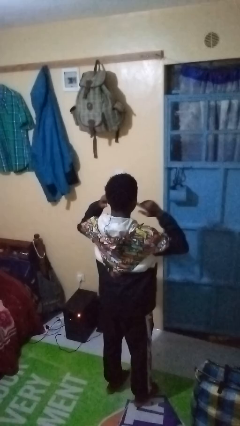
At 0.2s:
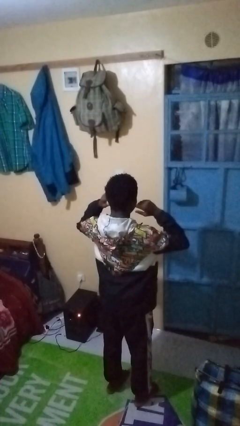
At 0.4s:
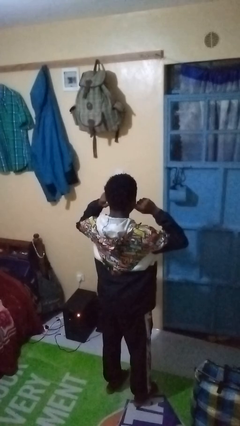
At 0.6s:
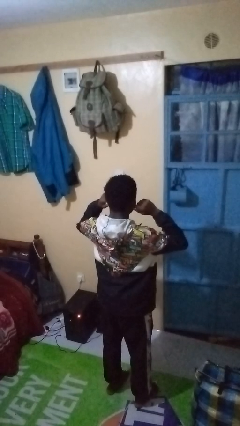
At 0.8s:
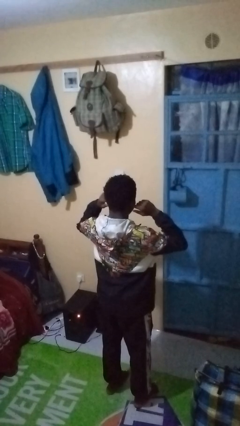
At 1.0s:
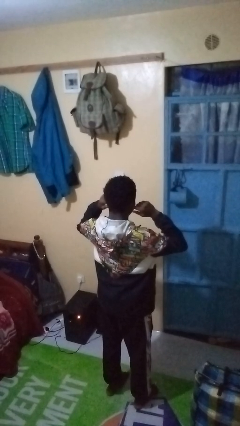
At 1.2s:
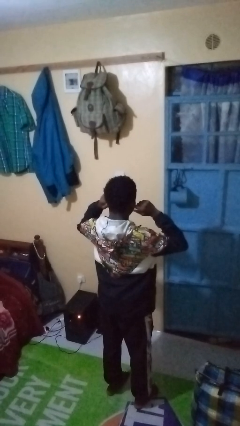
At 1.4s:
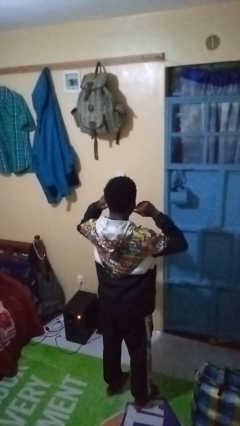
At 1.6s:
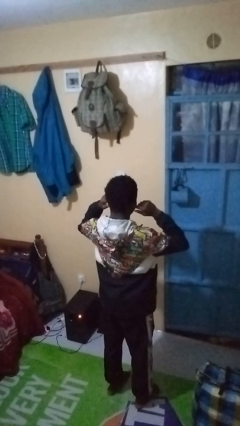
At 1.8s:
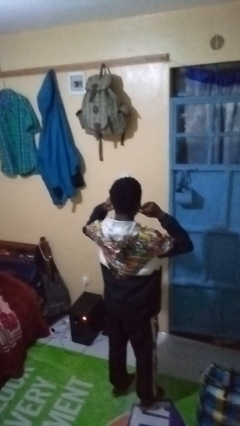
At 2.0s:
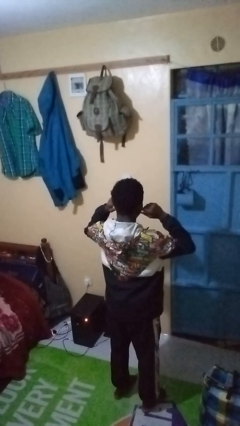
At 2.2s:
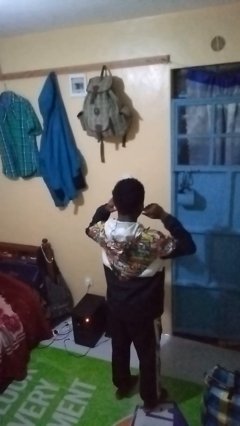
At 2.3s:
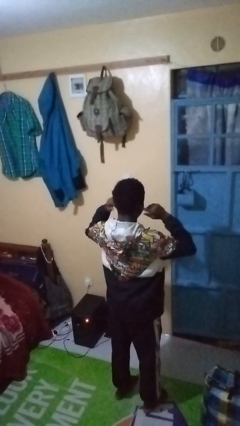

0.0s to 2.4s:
person puts fingers in ear

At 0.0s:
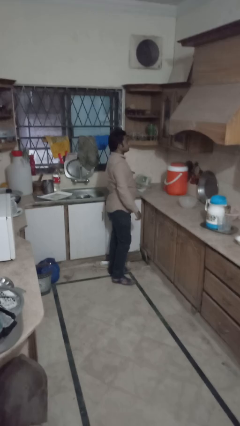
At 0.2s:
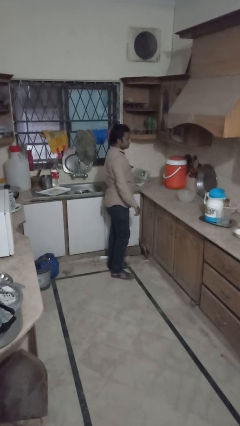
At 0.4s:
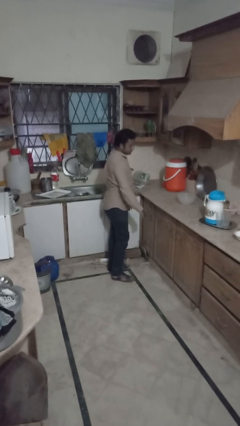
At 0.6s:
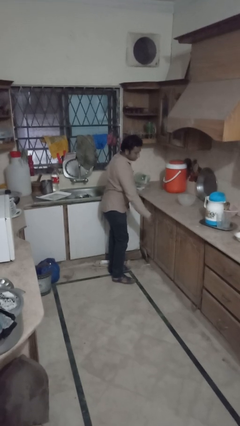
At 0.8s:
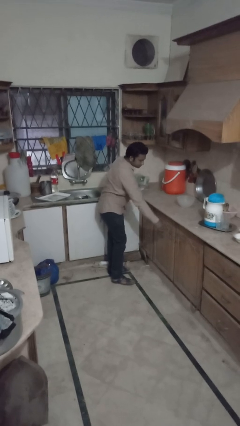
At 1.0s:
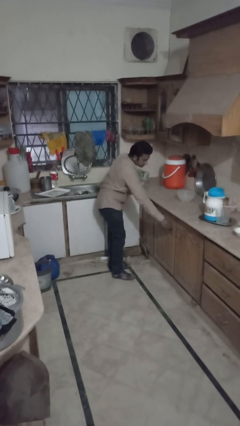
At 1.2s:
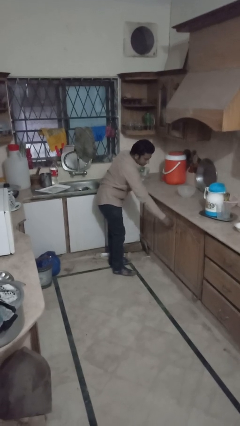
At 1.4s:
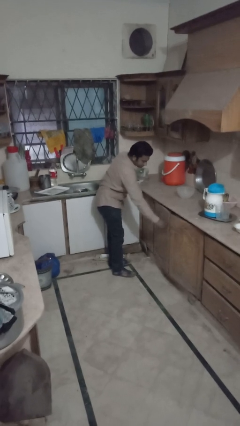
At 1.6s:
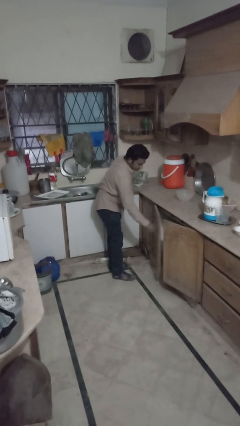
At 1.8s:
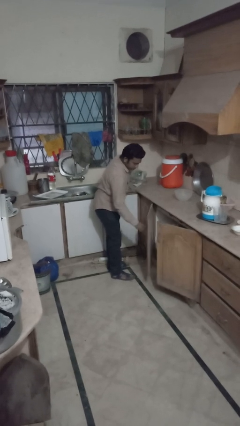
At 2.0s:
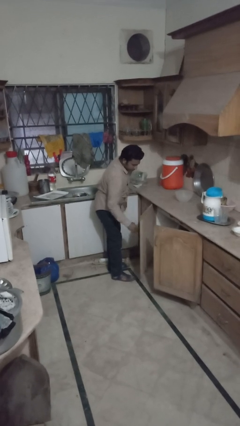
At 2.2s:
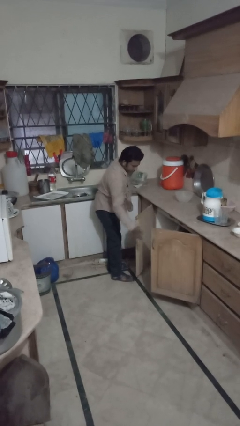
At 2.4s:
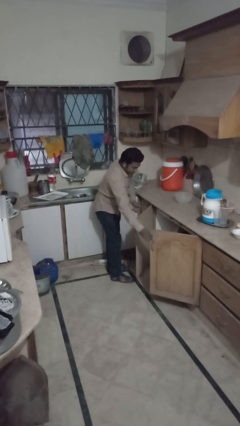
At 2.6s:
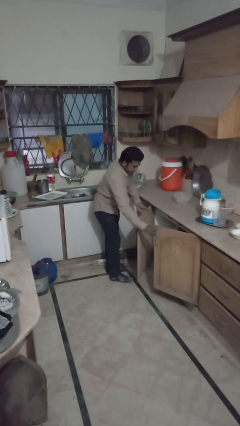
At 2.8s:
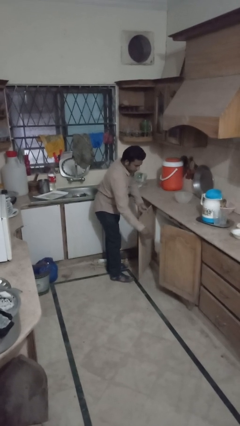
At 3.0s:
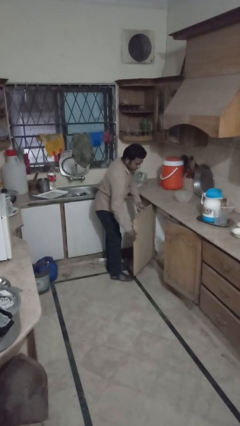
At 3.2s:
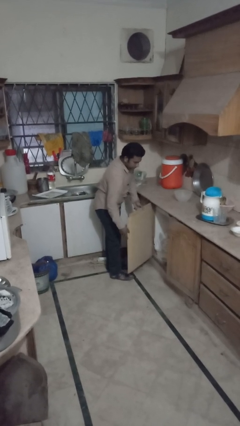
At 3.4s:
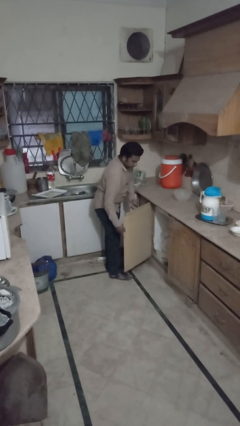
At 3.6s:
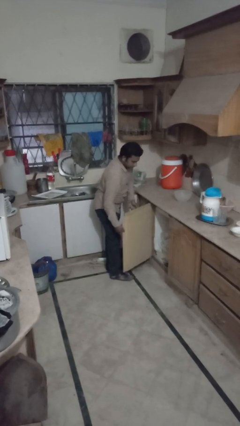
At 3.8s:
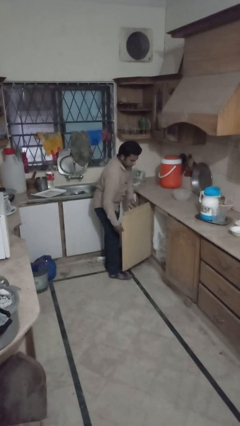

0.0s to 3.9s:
person opens cabinet

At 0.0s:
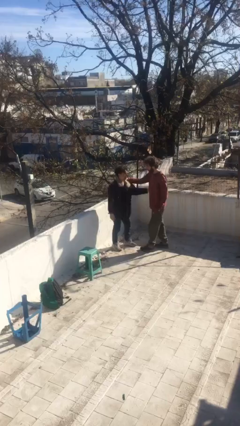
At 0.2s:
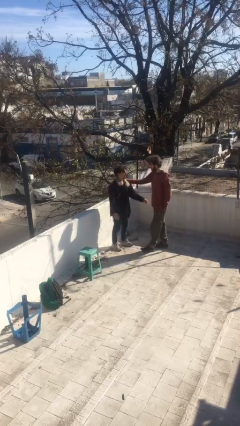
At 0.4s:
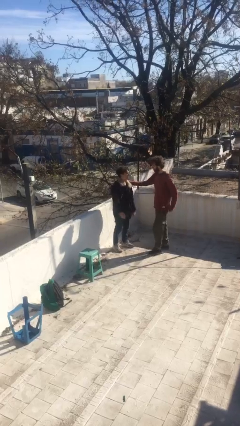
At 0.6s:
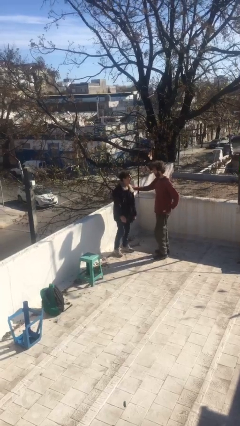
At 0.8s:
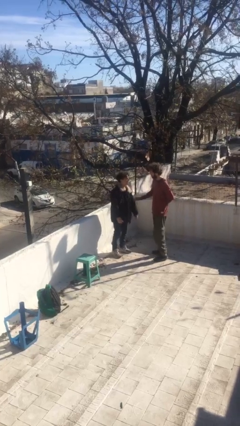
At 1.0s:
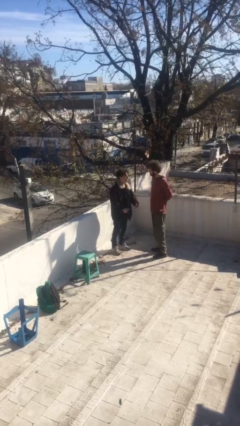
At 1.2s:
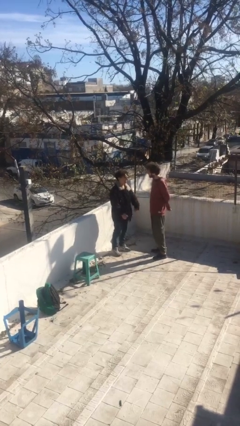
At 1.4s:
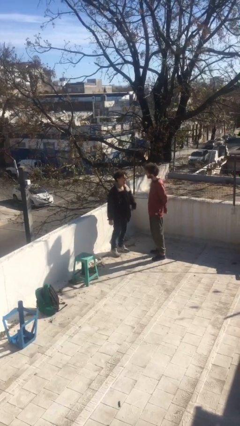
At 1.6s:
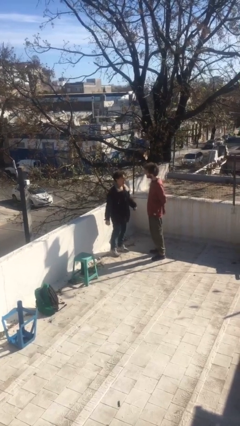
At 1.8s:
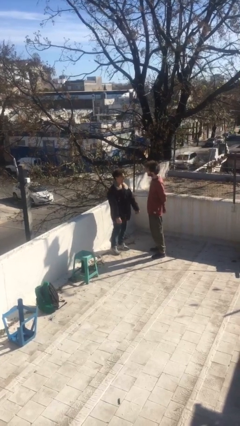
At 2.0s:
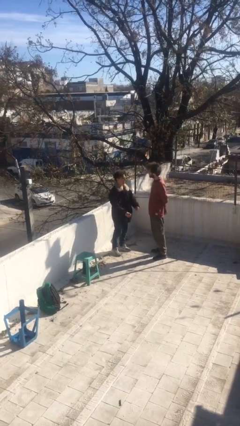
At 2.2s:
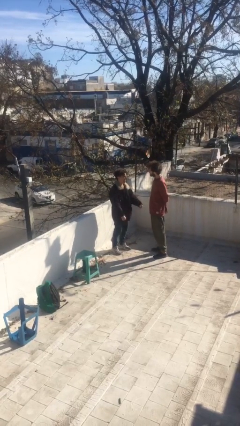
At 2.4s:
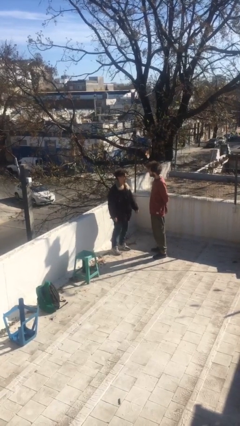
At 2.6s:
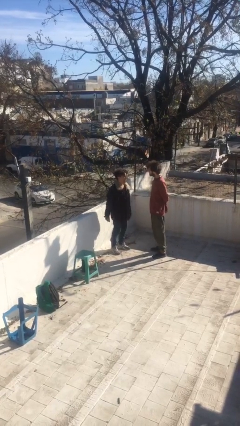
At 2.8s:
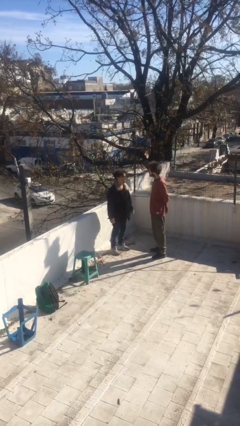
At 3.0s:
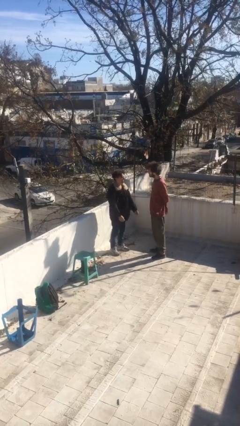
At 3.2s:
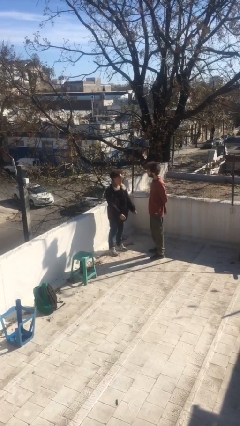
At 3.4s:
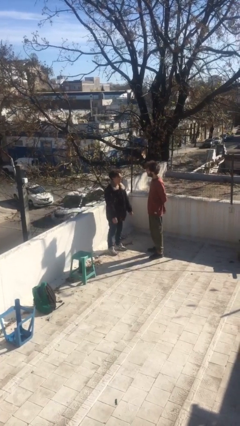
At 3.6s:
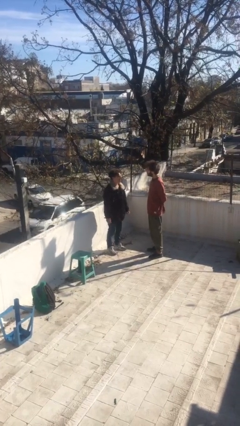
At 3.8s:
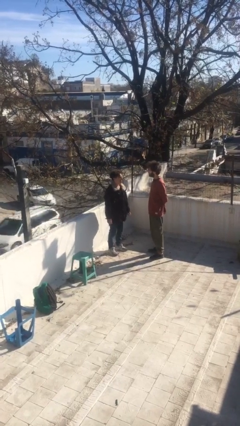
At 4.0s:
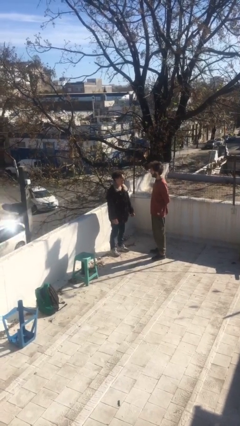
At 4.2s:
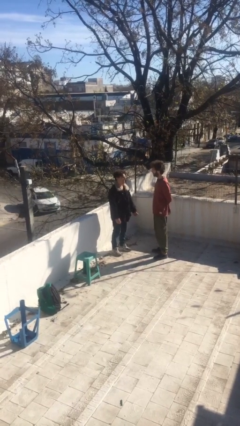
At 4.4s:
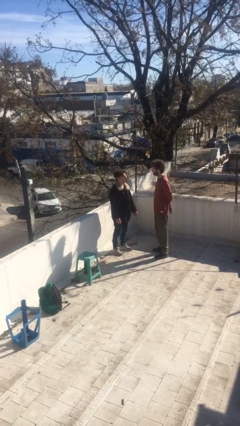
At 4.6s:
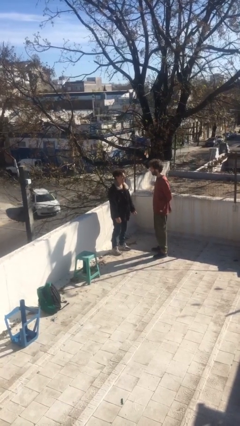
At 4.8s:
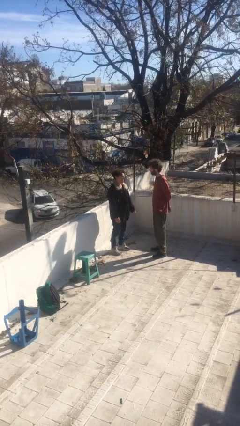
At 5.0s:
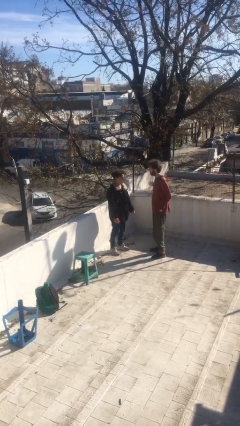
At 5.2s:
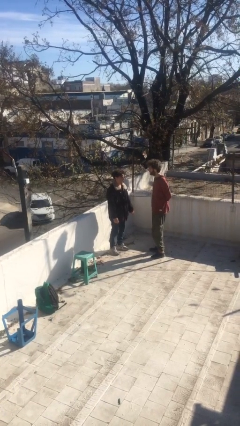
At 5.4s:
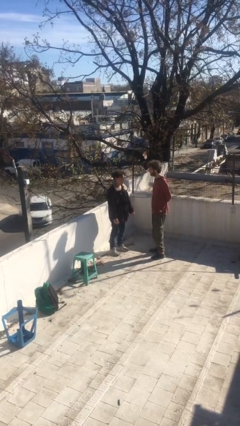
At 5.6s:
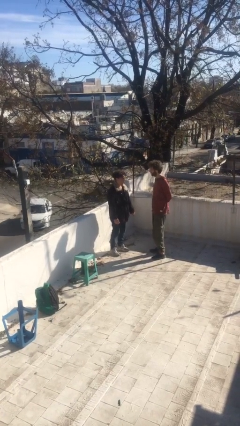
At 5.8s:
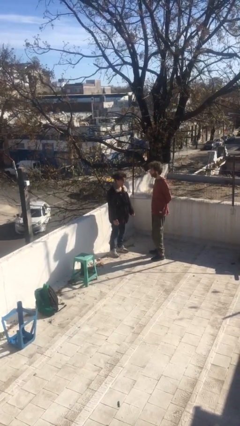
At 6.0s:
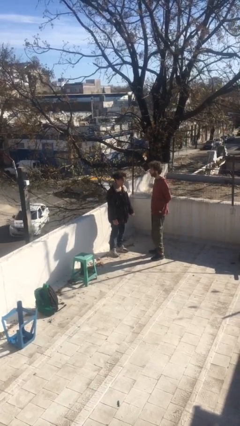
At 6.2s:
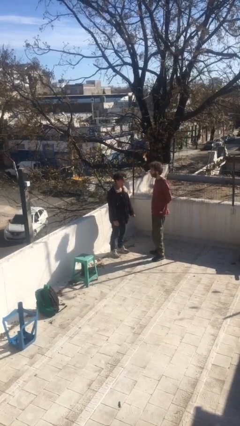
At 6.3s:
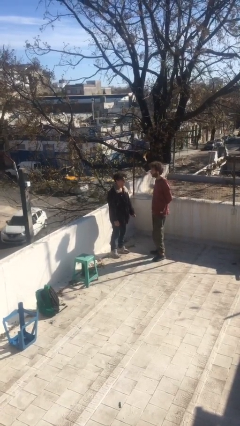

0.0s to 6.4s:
person talks to person

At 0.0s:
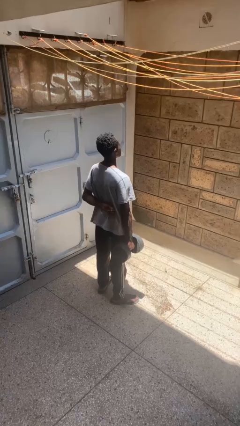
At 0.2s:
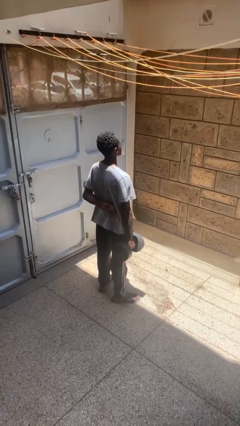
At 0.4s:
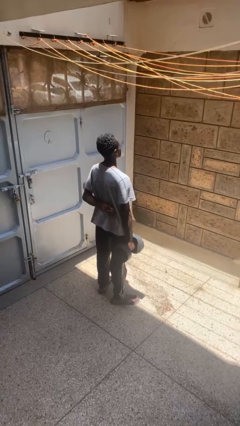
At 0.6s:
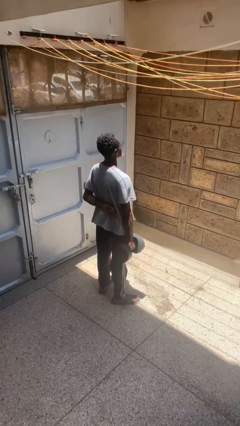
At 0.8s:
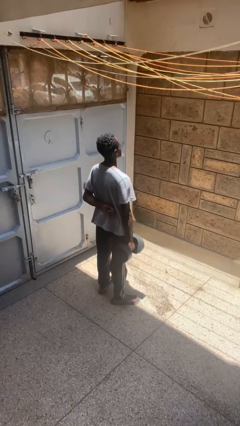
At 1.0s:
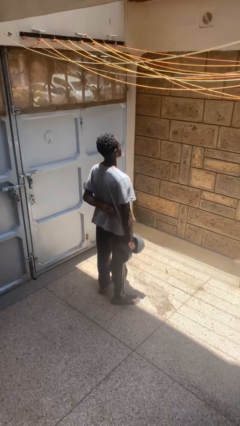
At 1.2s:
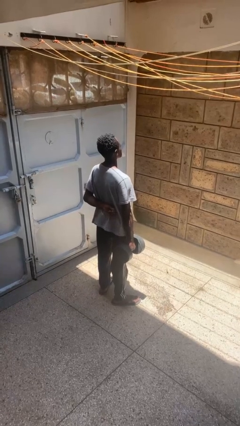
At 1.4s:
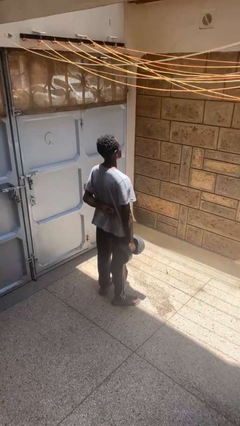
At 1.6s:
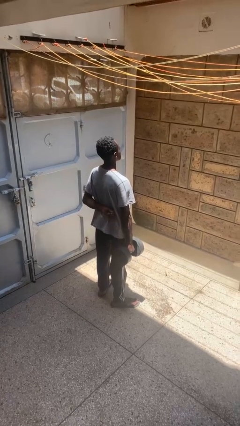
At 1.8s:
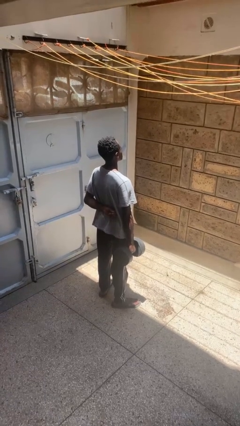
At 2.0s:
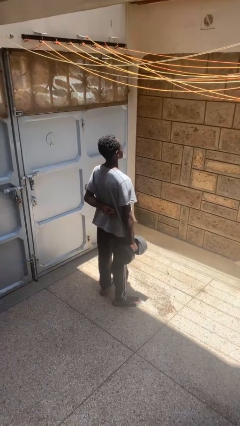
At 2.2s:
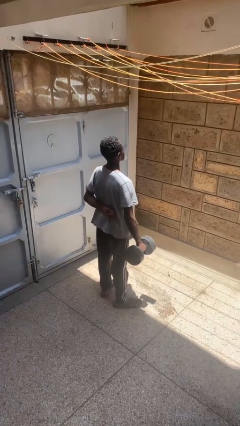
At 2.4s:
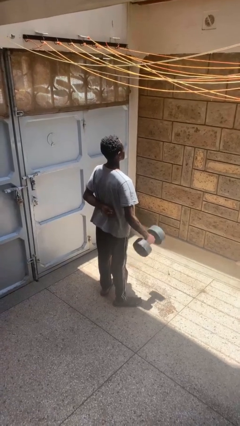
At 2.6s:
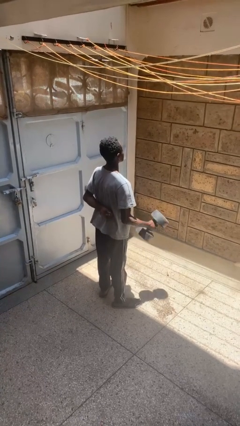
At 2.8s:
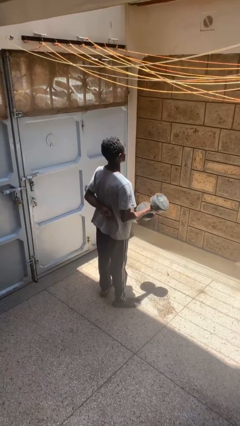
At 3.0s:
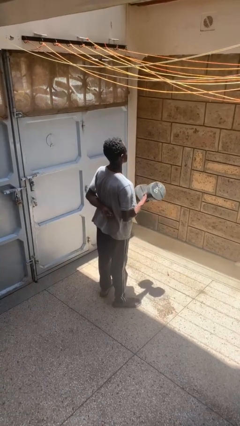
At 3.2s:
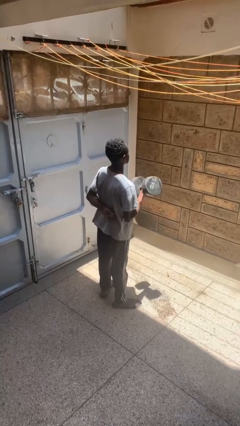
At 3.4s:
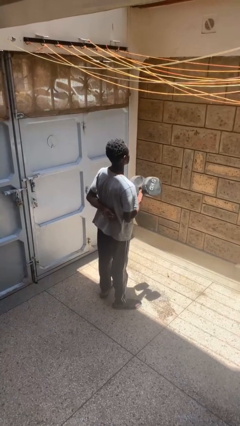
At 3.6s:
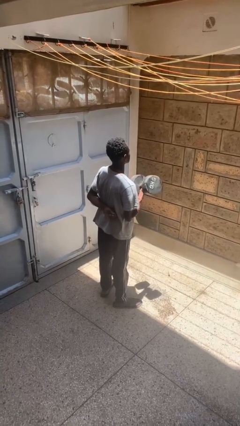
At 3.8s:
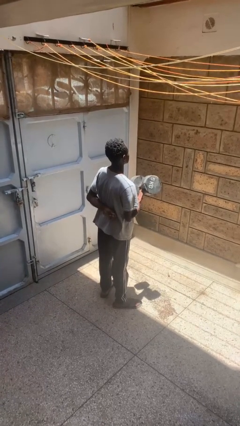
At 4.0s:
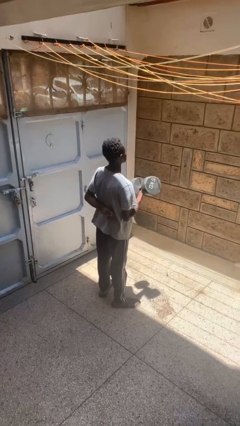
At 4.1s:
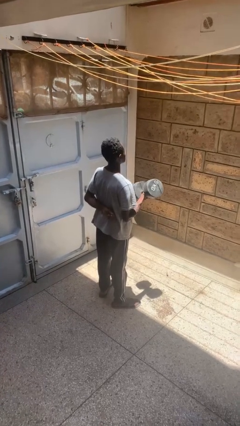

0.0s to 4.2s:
person lifts dumbbells

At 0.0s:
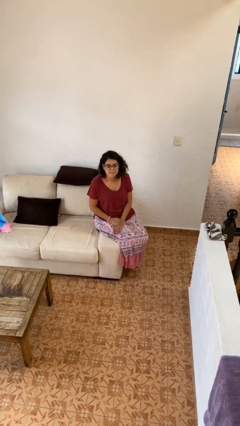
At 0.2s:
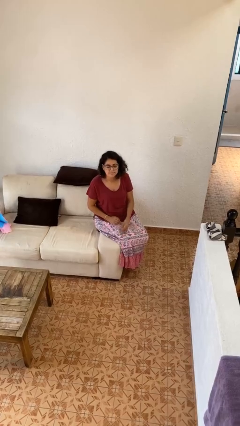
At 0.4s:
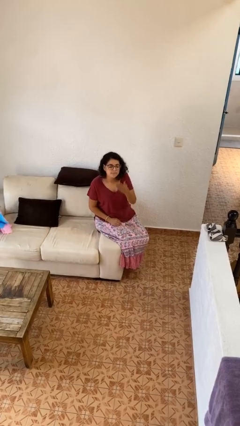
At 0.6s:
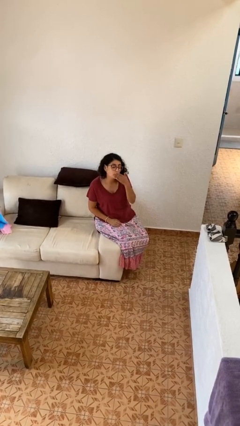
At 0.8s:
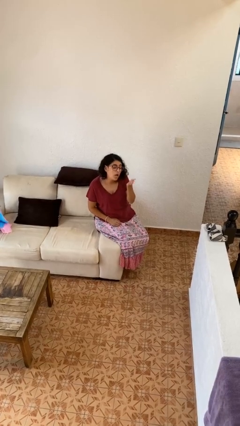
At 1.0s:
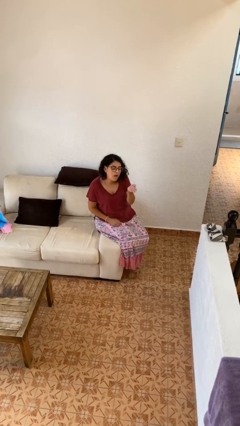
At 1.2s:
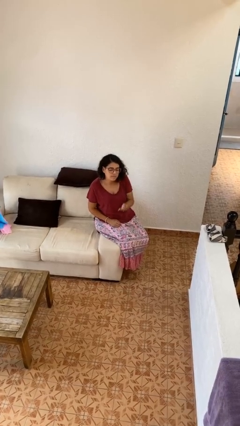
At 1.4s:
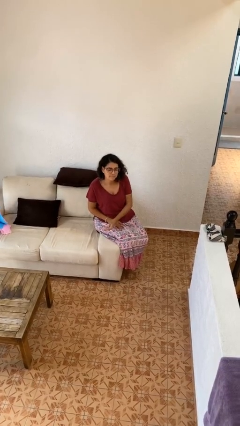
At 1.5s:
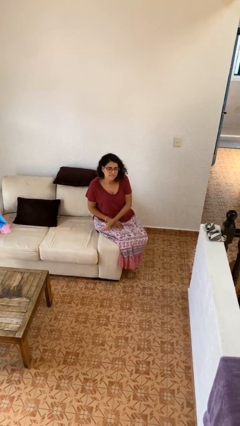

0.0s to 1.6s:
person gestures blow kiss
